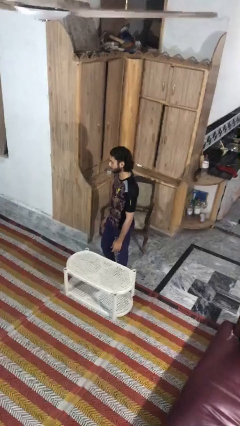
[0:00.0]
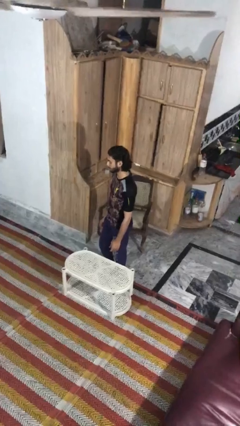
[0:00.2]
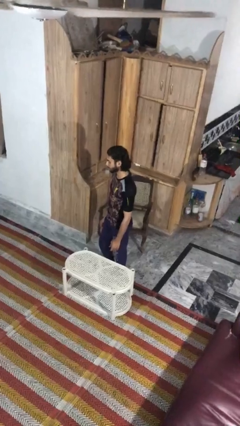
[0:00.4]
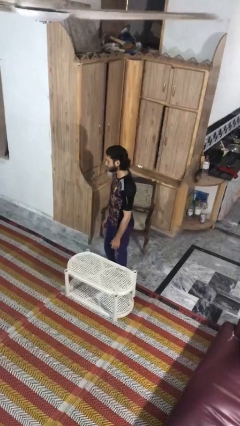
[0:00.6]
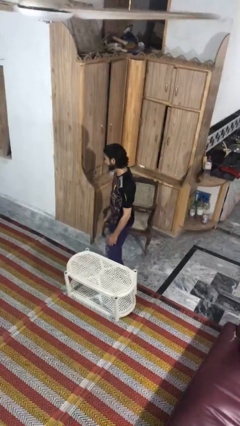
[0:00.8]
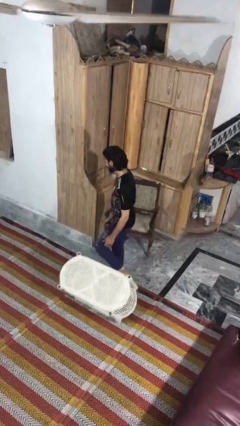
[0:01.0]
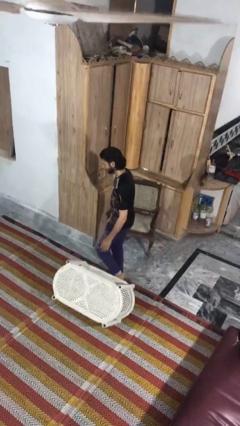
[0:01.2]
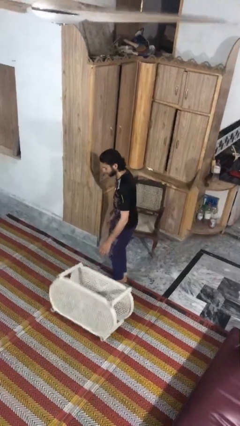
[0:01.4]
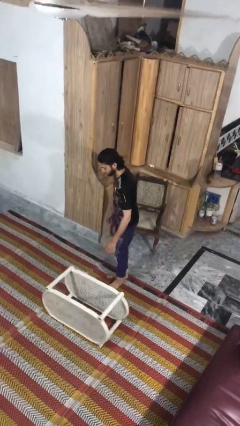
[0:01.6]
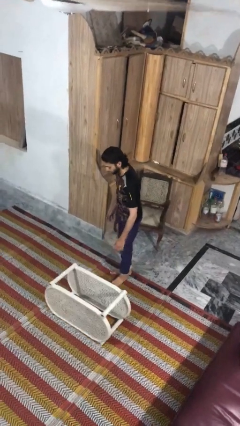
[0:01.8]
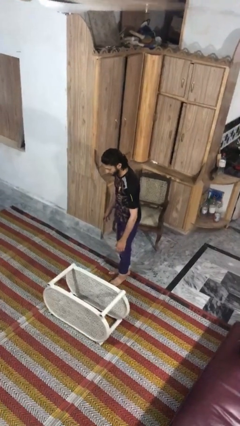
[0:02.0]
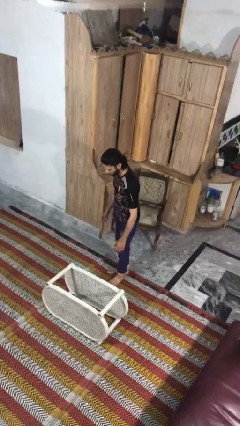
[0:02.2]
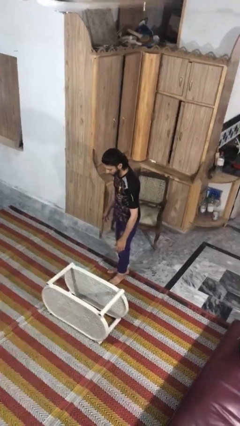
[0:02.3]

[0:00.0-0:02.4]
person knocks over furniture

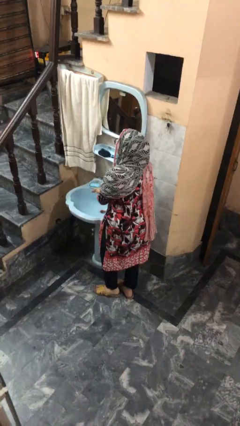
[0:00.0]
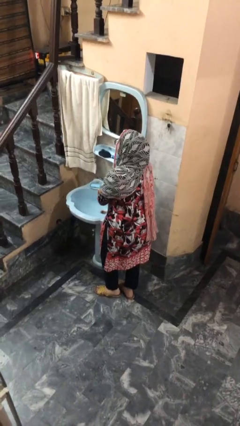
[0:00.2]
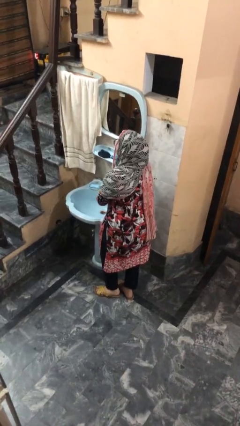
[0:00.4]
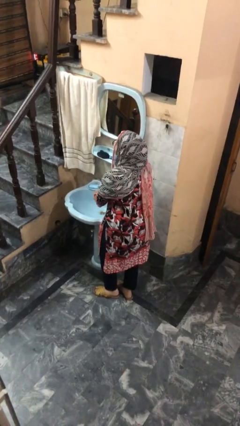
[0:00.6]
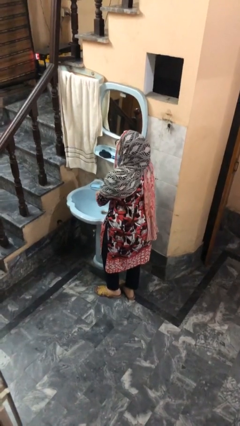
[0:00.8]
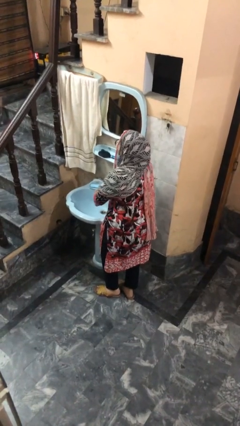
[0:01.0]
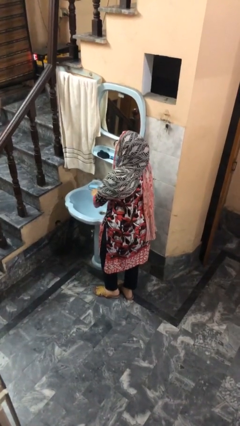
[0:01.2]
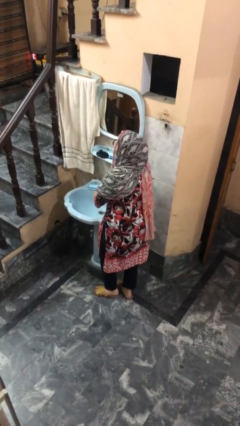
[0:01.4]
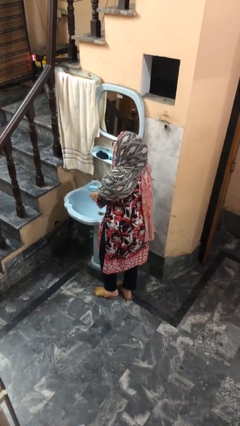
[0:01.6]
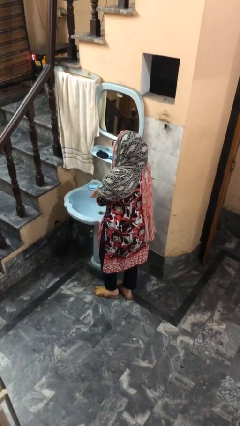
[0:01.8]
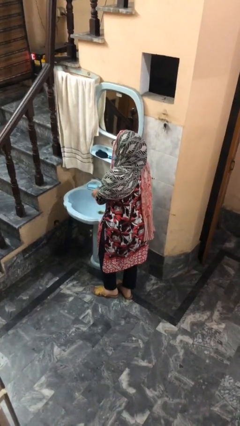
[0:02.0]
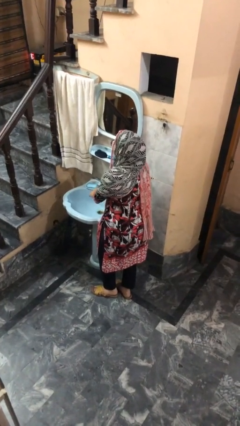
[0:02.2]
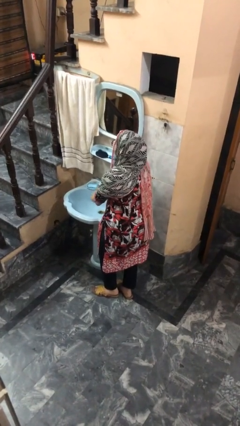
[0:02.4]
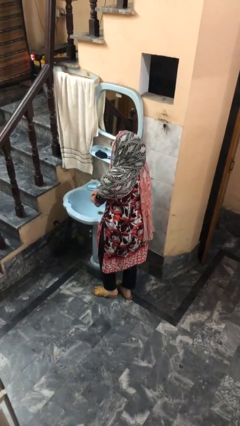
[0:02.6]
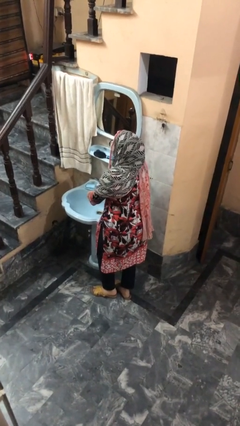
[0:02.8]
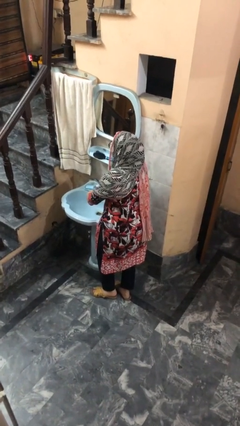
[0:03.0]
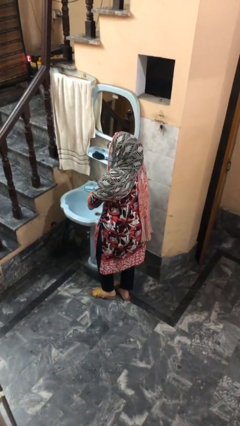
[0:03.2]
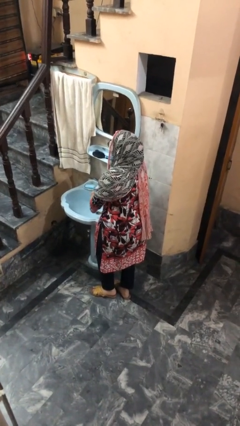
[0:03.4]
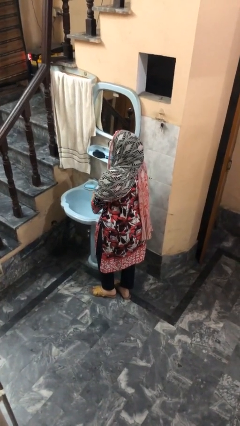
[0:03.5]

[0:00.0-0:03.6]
person washes face

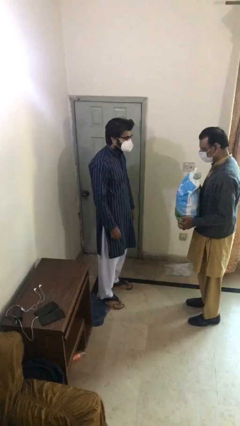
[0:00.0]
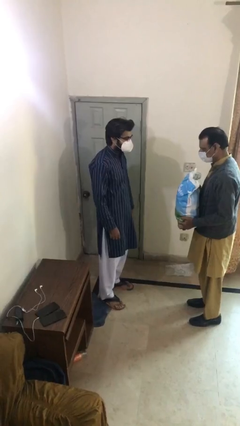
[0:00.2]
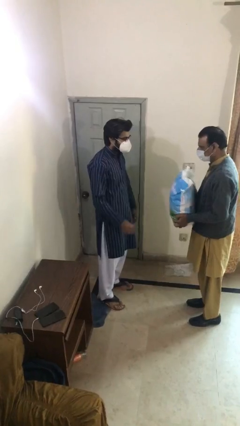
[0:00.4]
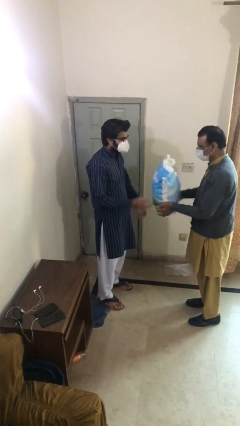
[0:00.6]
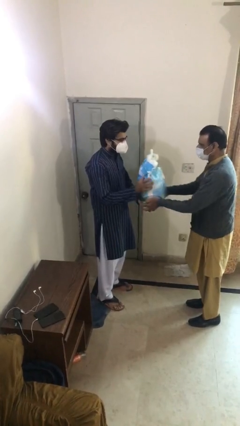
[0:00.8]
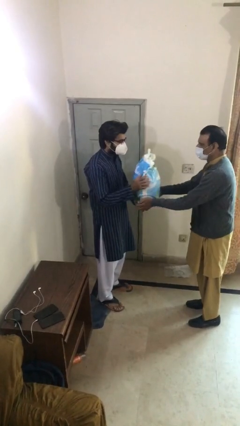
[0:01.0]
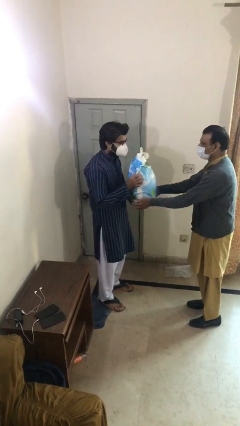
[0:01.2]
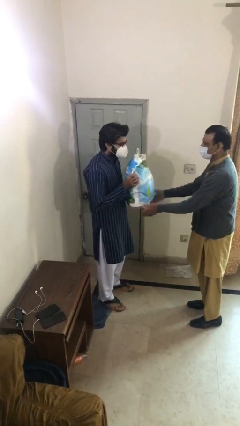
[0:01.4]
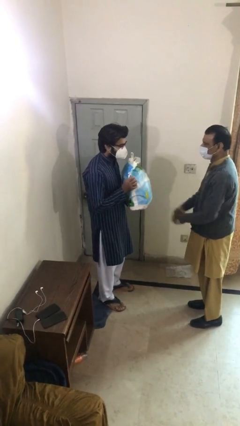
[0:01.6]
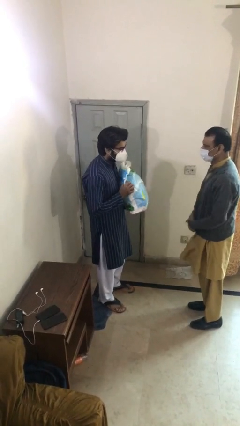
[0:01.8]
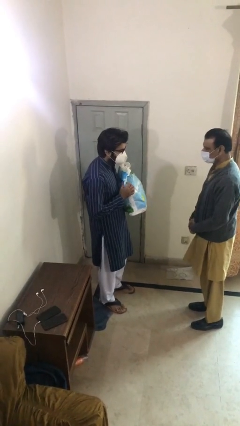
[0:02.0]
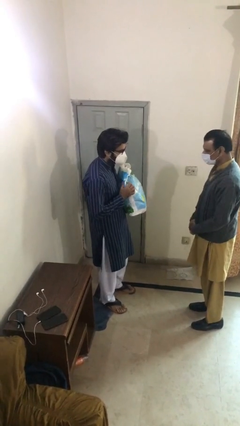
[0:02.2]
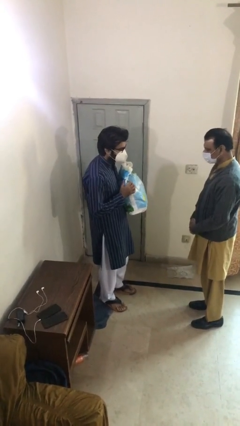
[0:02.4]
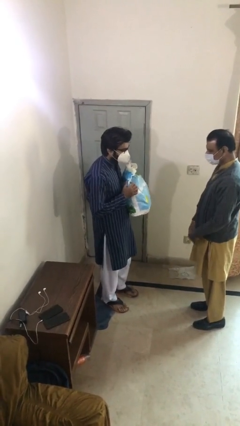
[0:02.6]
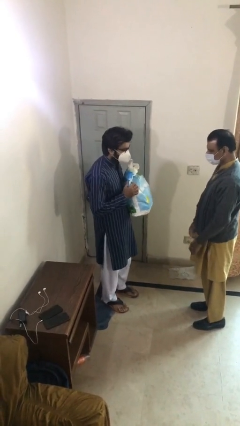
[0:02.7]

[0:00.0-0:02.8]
person transfers object to person

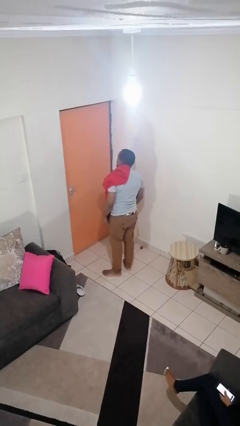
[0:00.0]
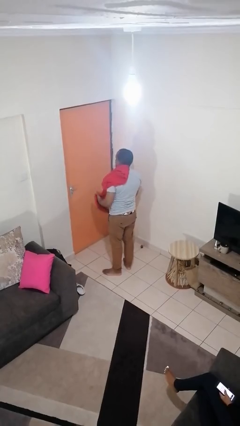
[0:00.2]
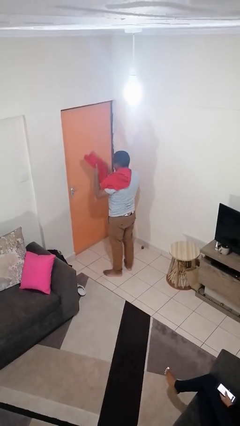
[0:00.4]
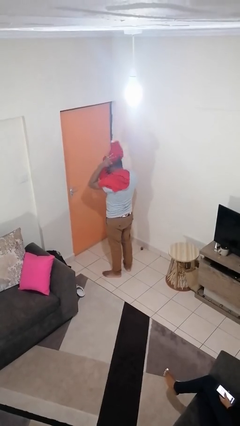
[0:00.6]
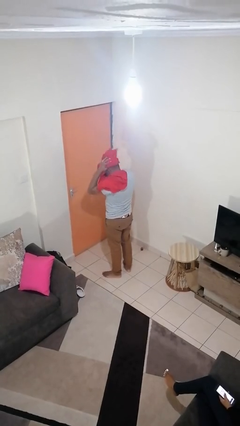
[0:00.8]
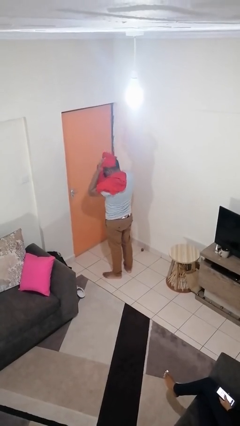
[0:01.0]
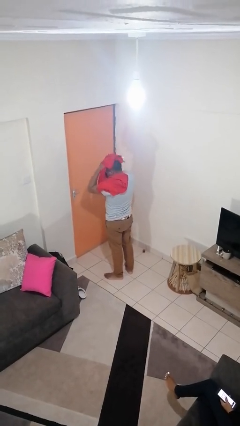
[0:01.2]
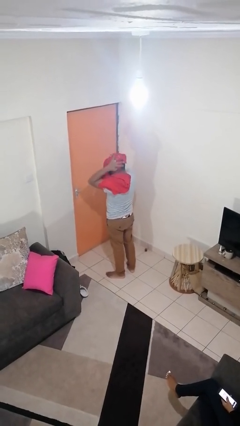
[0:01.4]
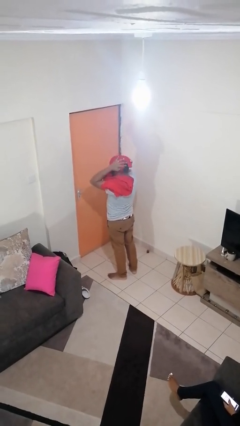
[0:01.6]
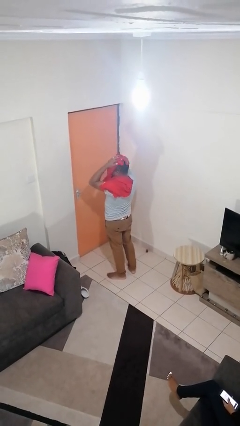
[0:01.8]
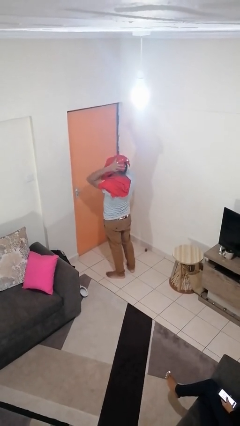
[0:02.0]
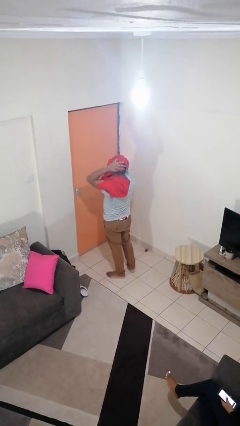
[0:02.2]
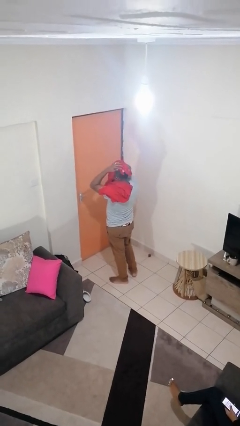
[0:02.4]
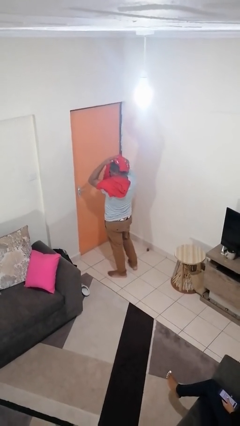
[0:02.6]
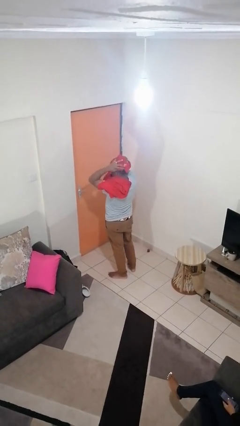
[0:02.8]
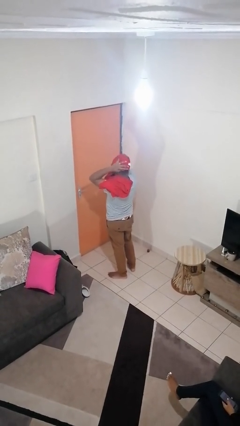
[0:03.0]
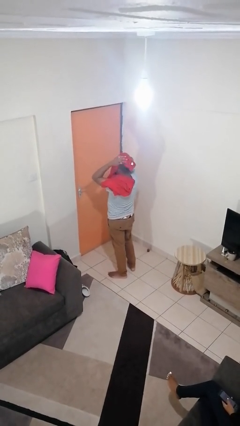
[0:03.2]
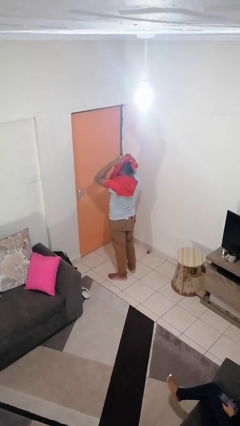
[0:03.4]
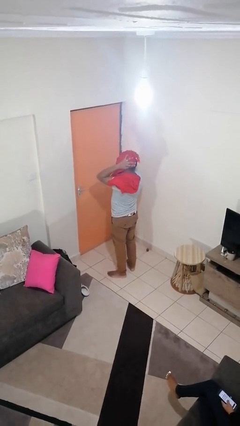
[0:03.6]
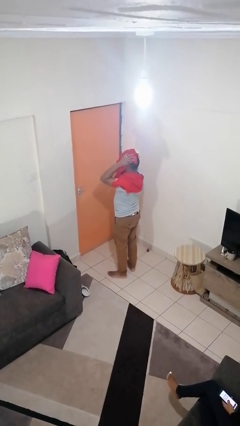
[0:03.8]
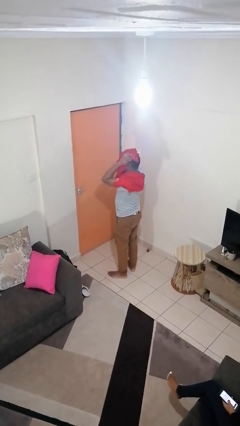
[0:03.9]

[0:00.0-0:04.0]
person dries hair with towel

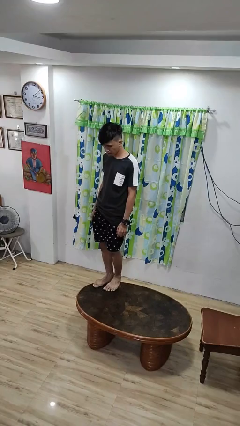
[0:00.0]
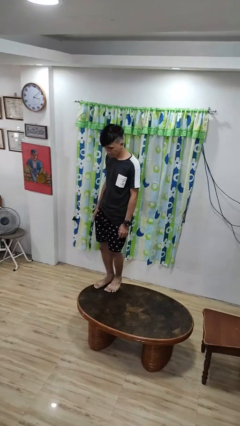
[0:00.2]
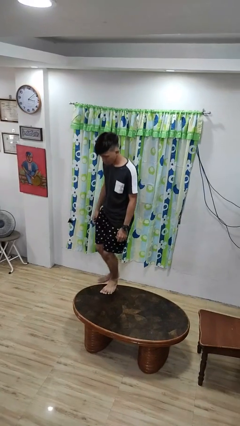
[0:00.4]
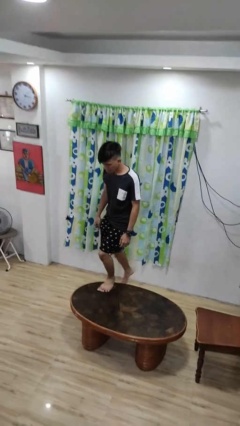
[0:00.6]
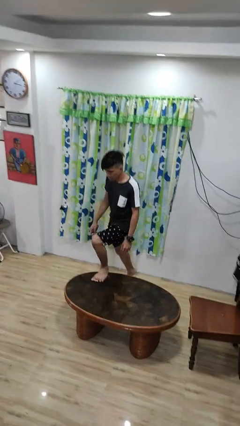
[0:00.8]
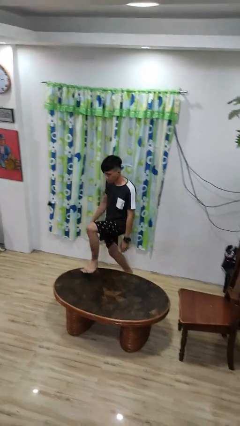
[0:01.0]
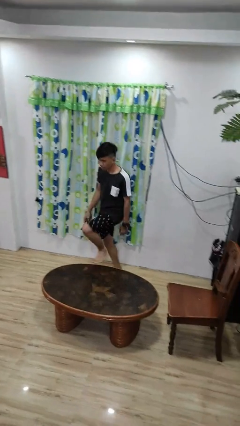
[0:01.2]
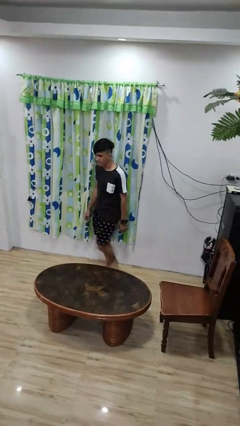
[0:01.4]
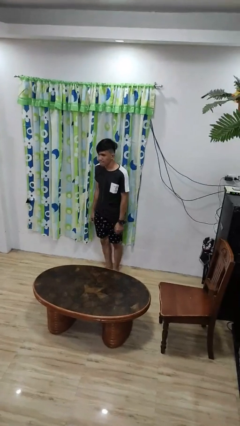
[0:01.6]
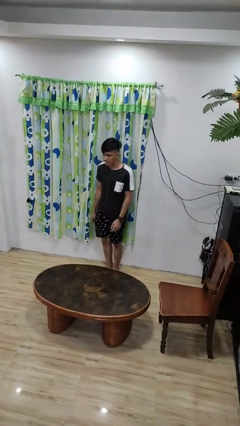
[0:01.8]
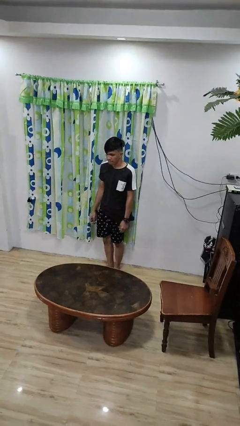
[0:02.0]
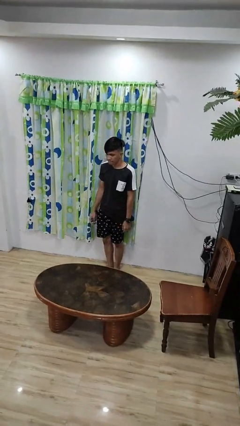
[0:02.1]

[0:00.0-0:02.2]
person climbs off table

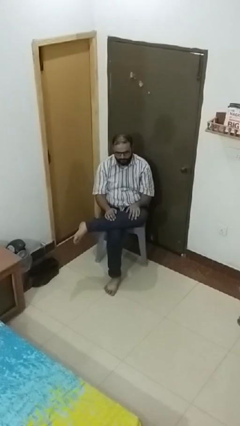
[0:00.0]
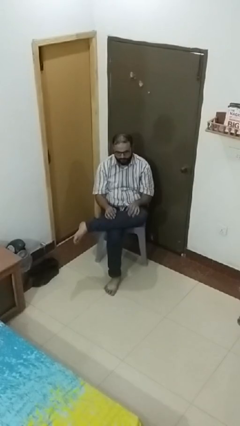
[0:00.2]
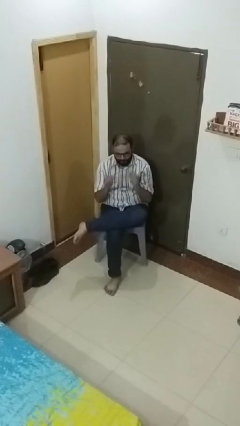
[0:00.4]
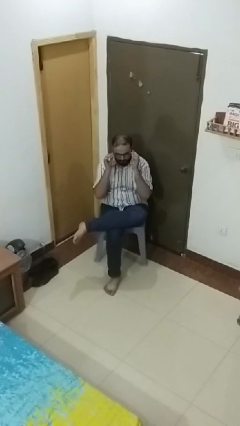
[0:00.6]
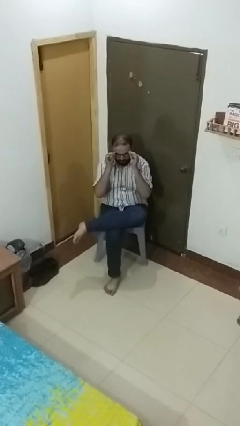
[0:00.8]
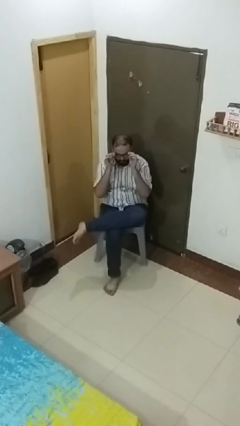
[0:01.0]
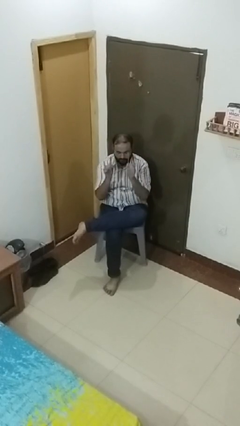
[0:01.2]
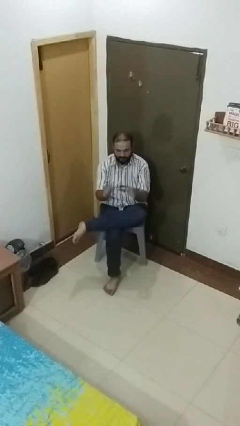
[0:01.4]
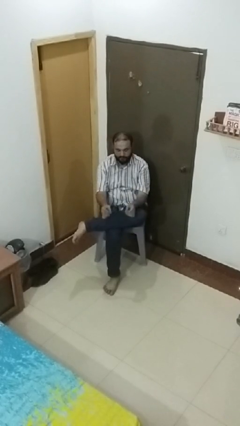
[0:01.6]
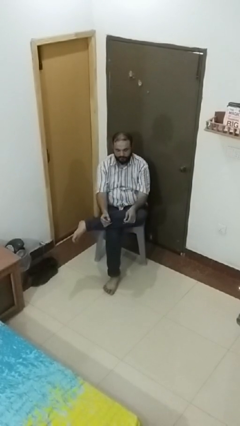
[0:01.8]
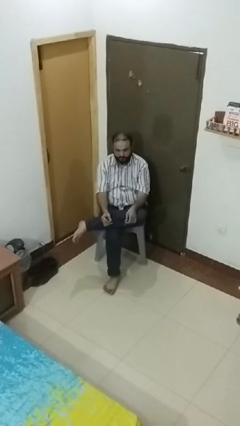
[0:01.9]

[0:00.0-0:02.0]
person takes off glasses

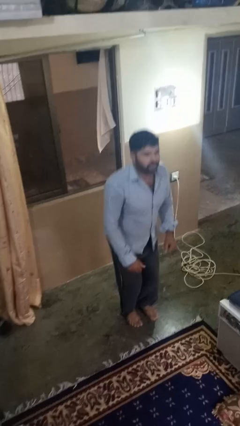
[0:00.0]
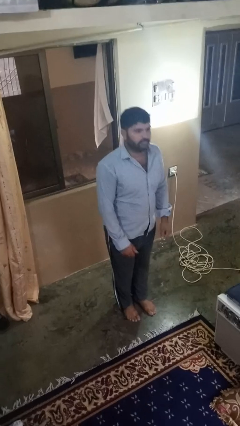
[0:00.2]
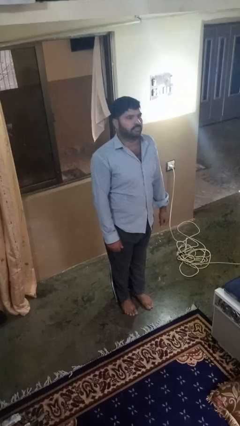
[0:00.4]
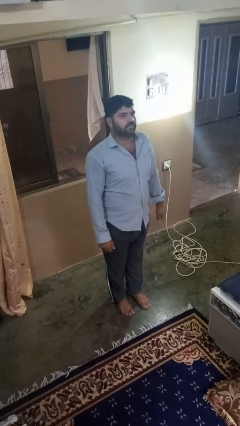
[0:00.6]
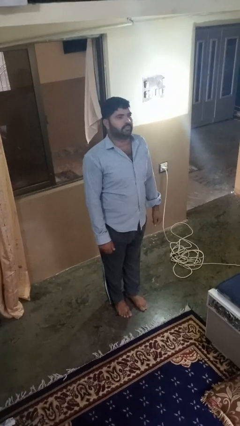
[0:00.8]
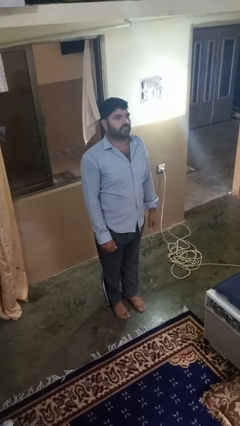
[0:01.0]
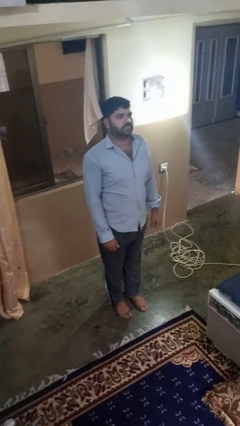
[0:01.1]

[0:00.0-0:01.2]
person jumps
